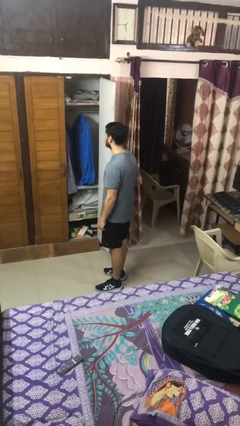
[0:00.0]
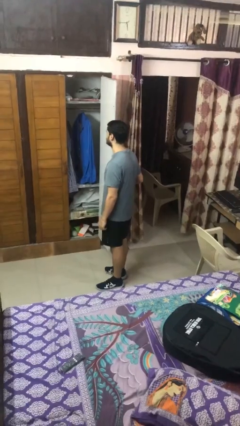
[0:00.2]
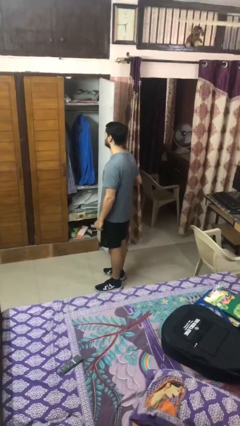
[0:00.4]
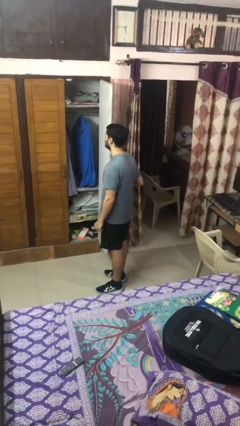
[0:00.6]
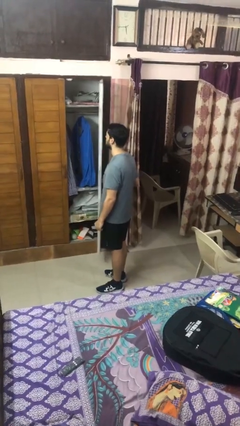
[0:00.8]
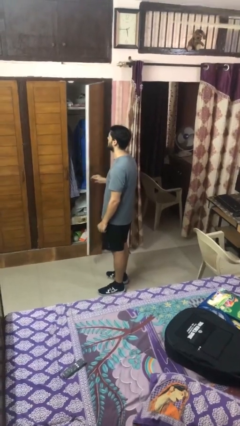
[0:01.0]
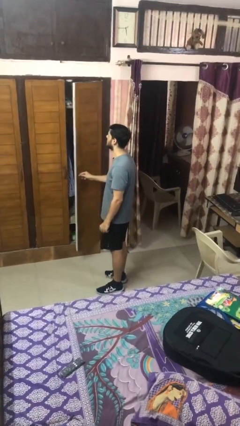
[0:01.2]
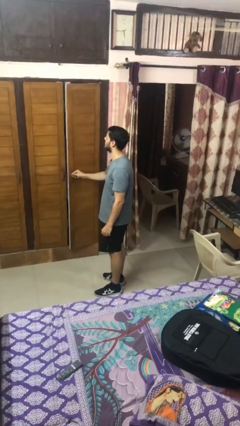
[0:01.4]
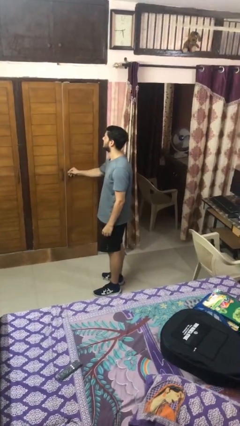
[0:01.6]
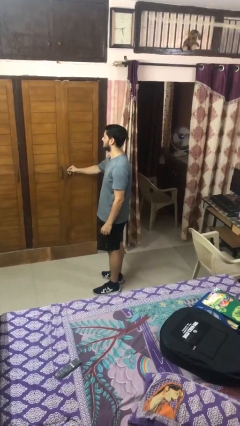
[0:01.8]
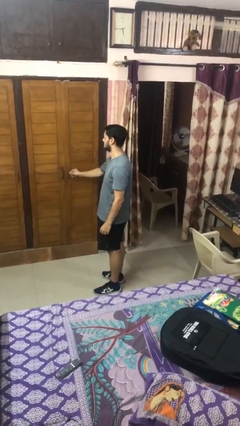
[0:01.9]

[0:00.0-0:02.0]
person closes closet door

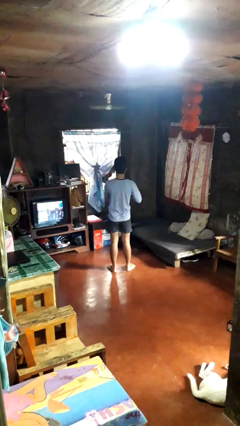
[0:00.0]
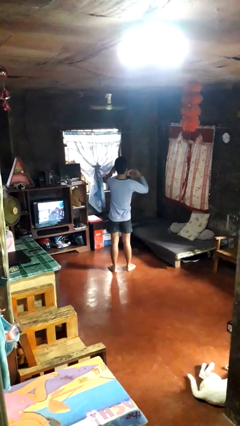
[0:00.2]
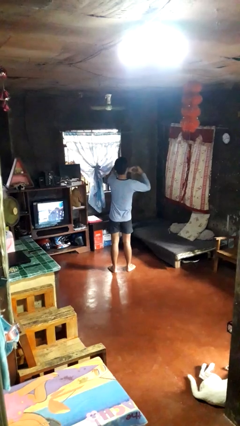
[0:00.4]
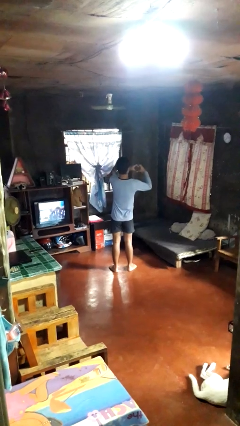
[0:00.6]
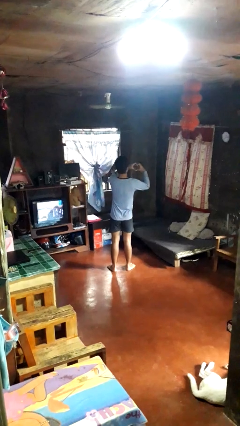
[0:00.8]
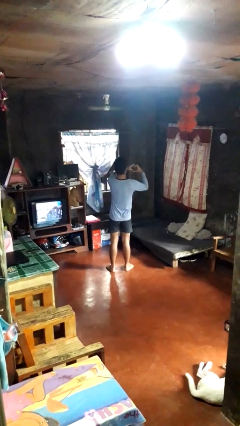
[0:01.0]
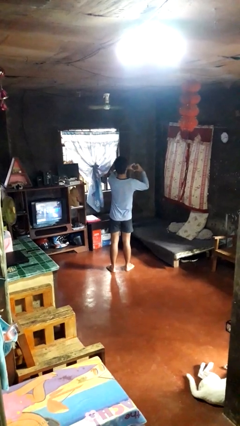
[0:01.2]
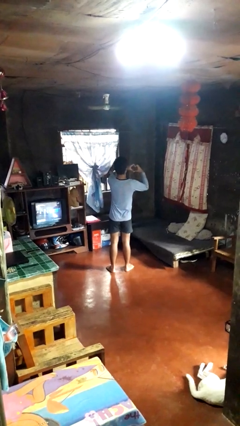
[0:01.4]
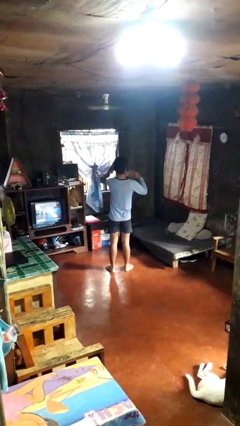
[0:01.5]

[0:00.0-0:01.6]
person gestures heart

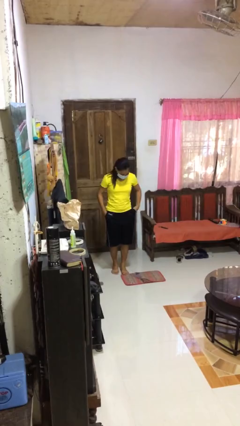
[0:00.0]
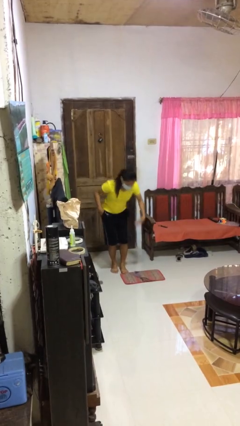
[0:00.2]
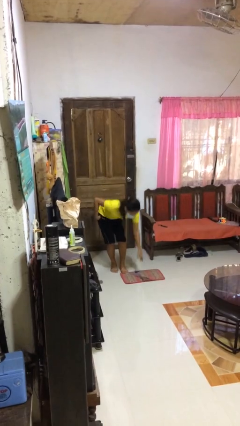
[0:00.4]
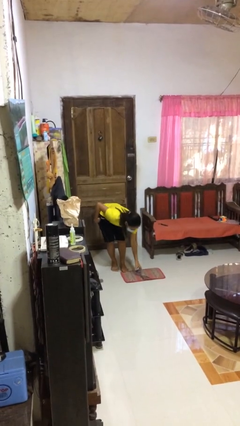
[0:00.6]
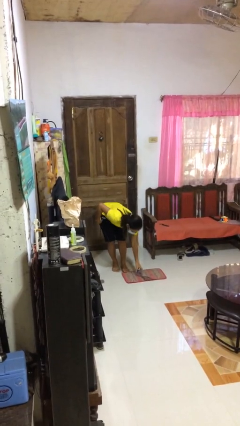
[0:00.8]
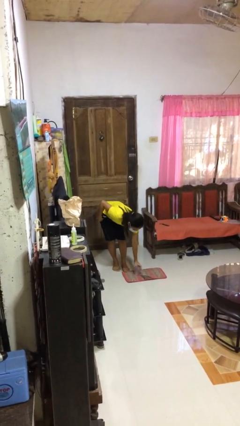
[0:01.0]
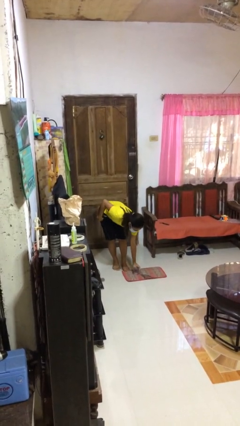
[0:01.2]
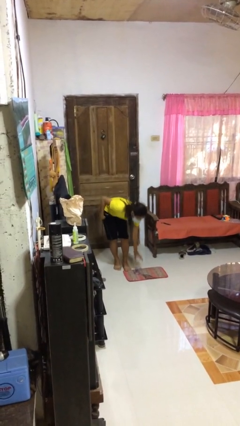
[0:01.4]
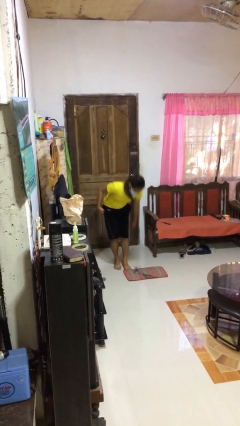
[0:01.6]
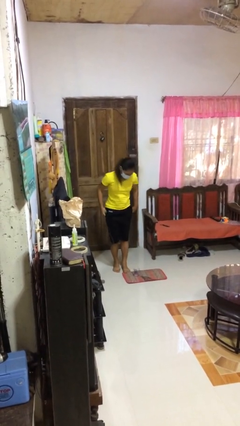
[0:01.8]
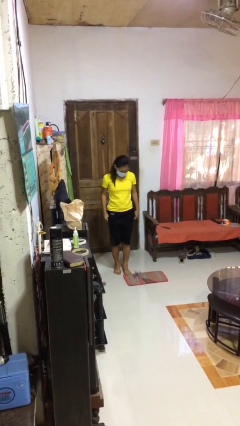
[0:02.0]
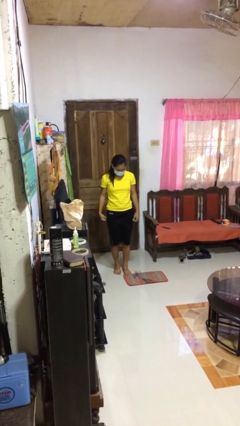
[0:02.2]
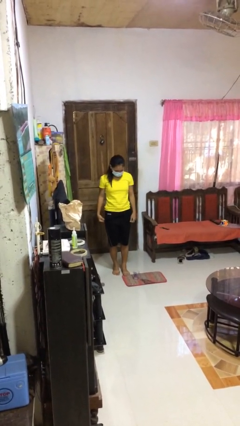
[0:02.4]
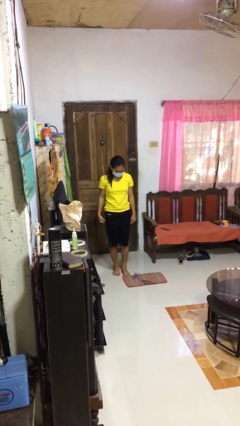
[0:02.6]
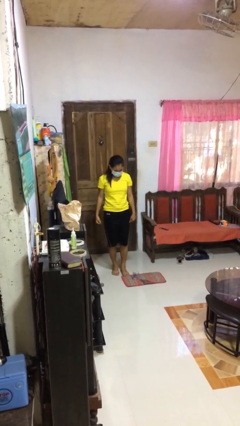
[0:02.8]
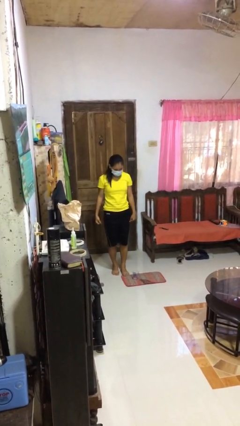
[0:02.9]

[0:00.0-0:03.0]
person sets upright glass

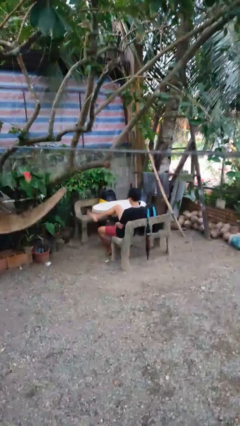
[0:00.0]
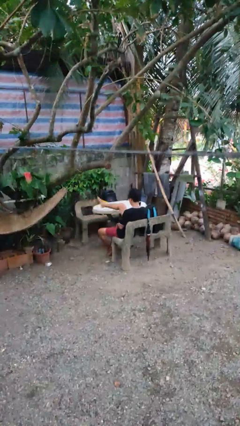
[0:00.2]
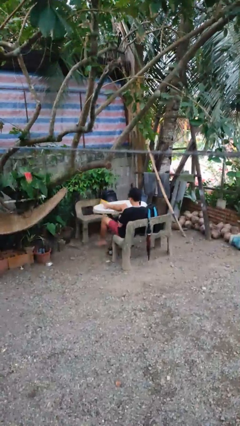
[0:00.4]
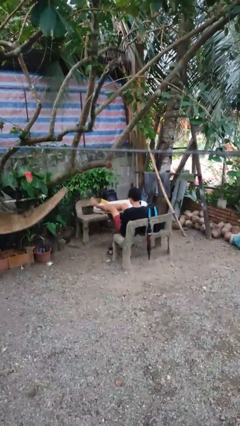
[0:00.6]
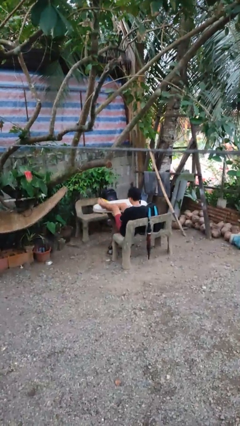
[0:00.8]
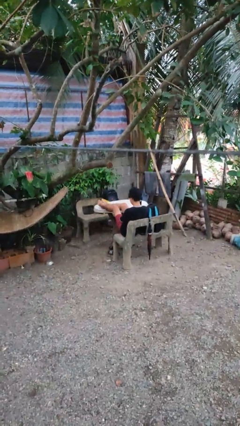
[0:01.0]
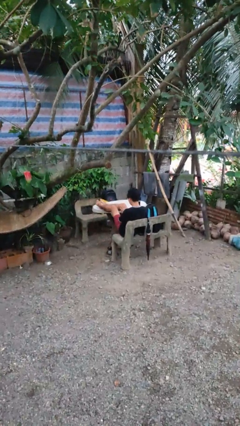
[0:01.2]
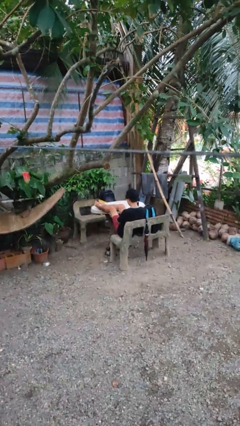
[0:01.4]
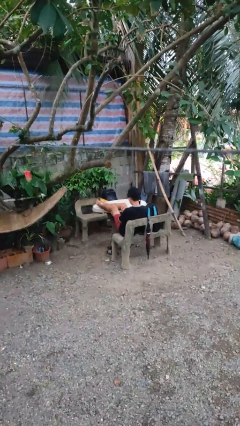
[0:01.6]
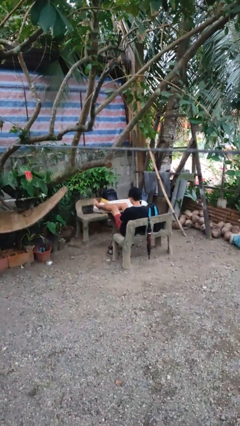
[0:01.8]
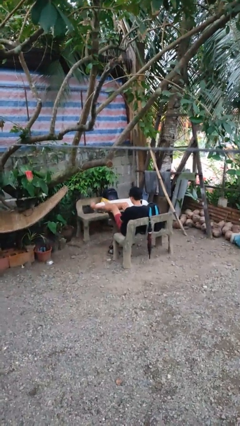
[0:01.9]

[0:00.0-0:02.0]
person puts feet up

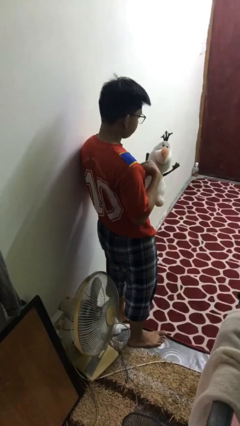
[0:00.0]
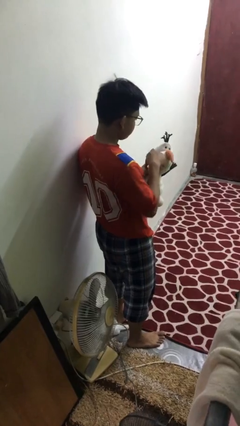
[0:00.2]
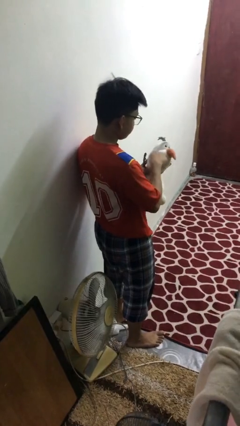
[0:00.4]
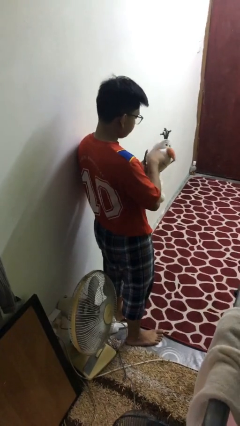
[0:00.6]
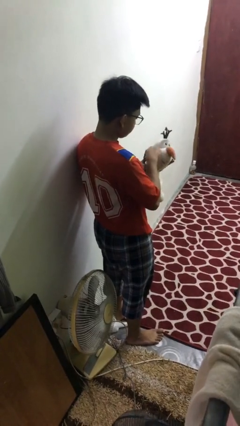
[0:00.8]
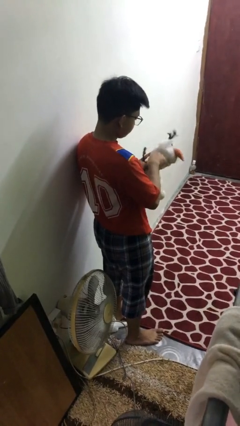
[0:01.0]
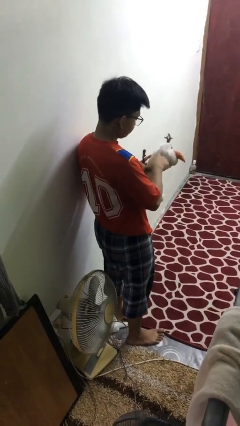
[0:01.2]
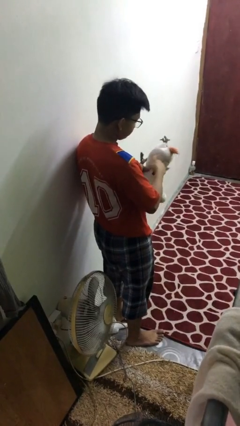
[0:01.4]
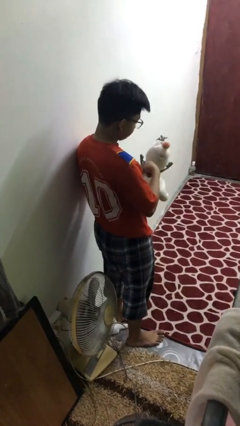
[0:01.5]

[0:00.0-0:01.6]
person taps object with finger

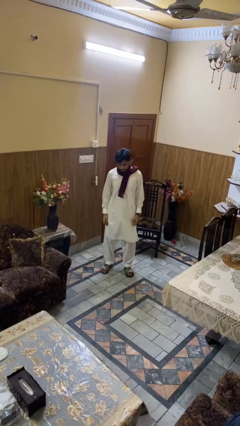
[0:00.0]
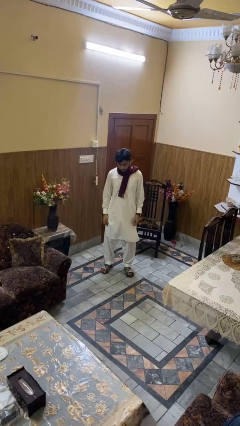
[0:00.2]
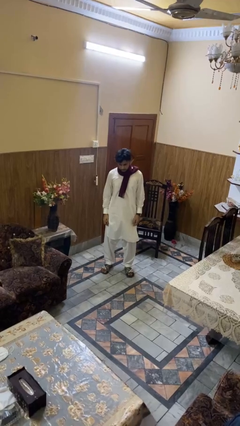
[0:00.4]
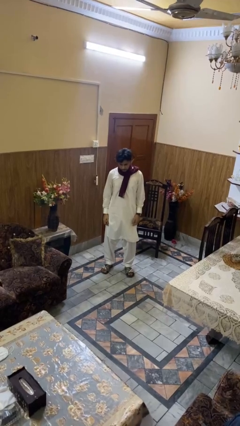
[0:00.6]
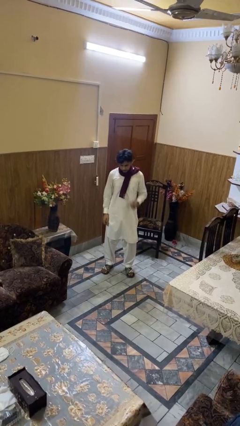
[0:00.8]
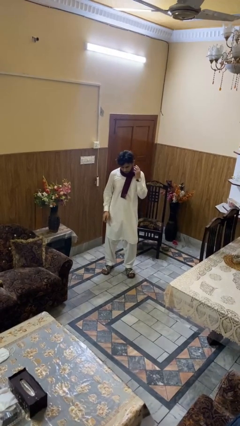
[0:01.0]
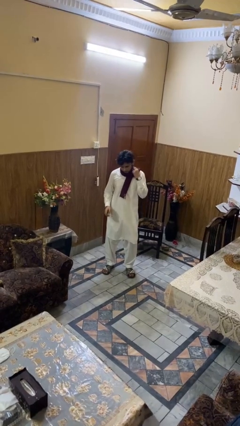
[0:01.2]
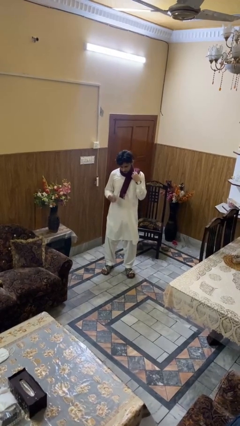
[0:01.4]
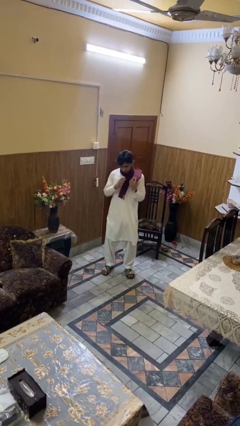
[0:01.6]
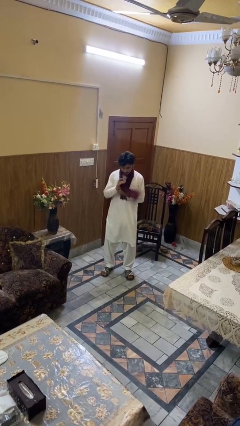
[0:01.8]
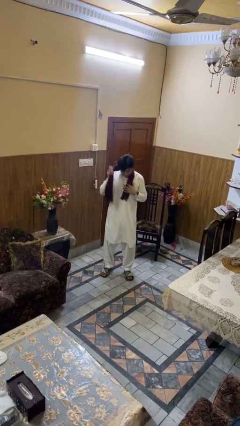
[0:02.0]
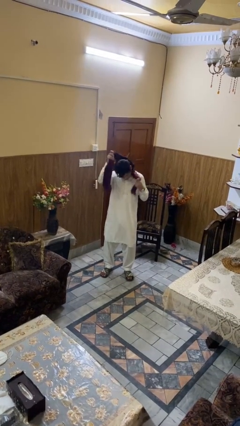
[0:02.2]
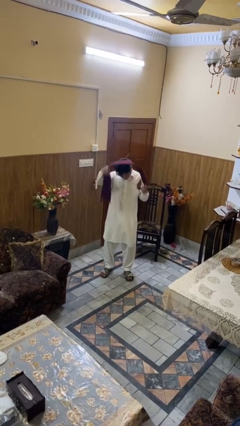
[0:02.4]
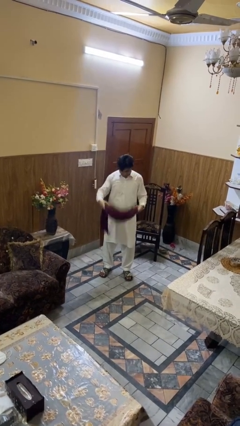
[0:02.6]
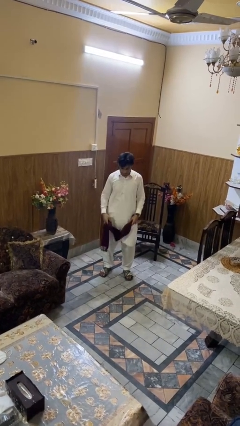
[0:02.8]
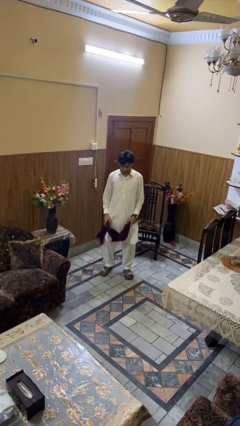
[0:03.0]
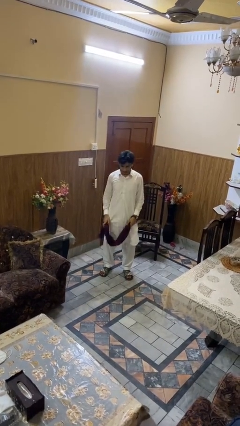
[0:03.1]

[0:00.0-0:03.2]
person takes off scarf

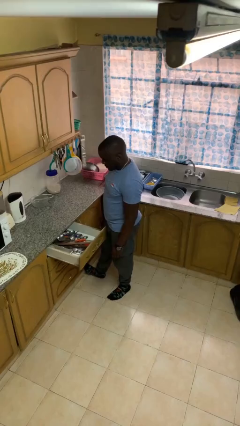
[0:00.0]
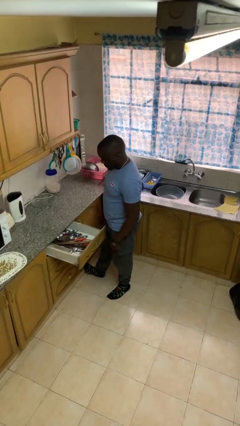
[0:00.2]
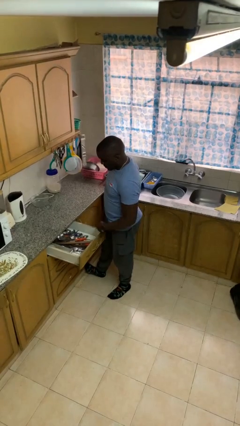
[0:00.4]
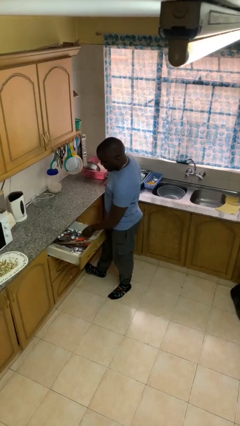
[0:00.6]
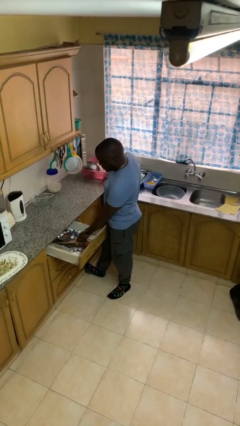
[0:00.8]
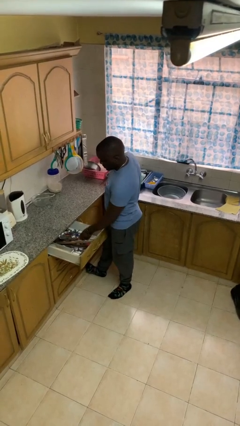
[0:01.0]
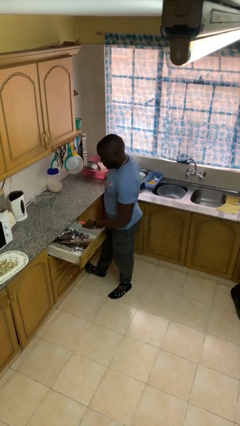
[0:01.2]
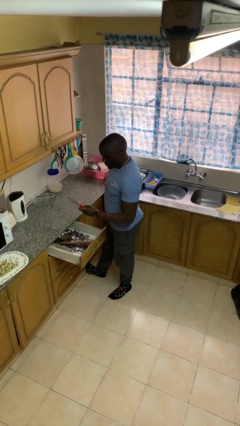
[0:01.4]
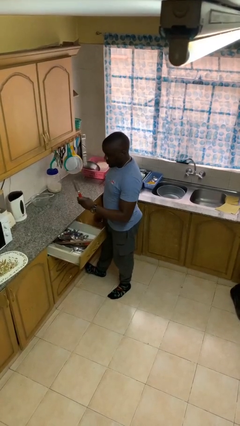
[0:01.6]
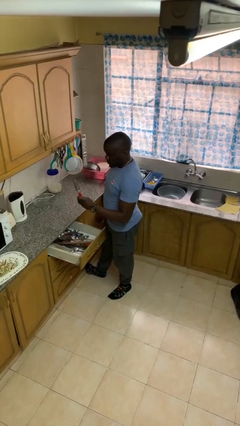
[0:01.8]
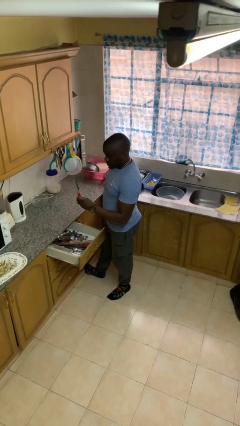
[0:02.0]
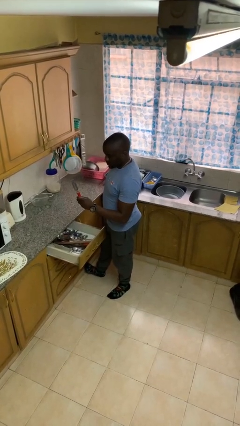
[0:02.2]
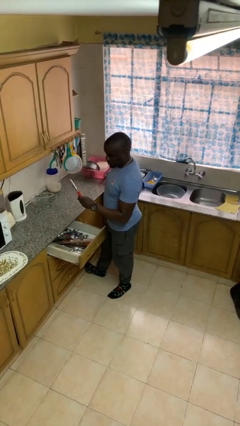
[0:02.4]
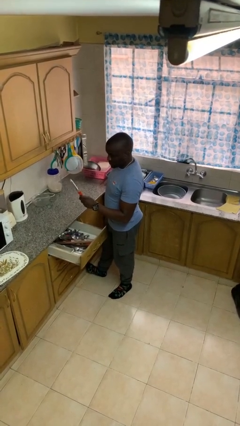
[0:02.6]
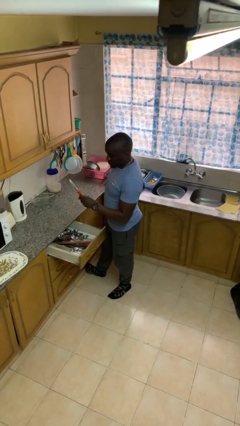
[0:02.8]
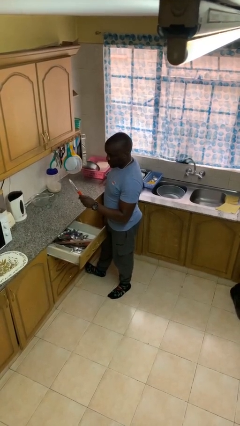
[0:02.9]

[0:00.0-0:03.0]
person takes object from kitchen drawer
